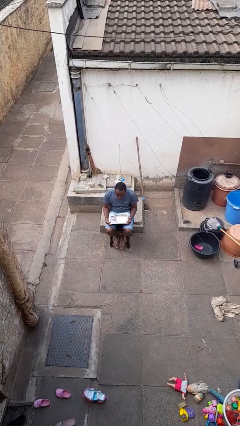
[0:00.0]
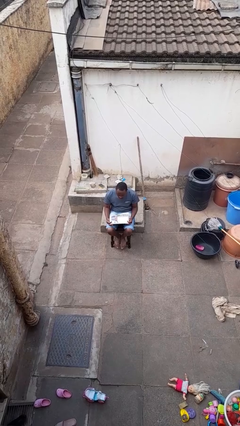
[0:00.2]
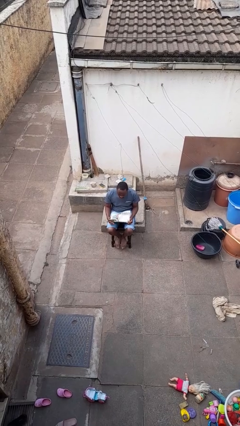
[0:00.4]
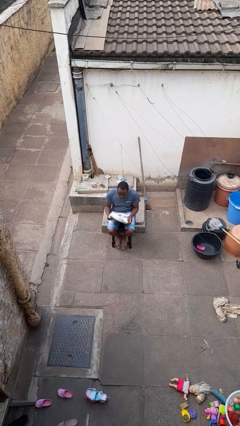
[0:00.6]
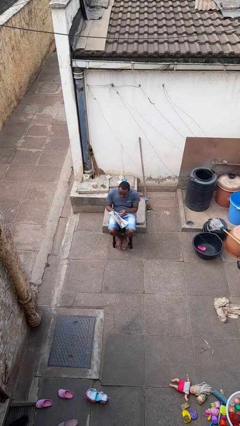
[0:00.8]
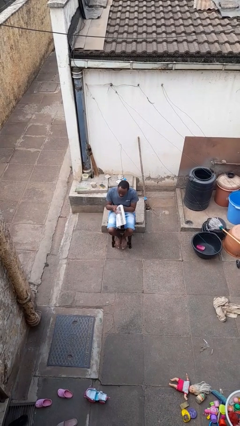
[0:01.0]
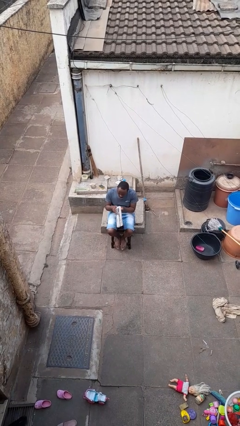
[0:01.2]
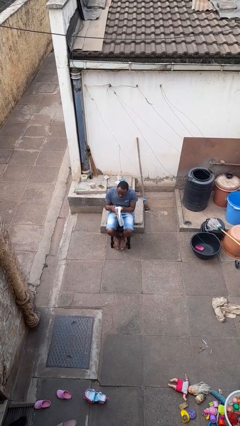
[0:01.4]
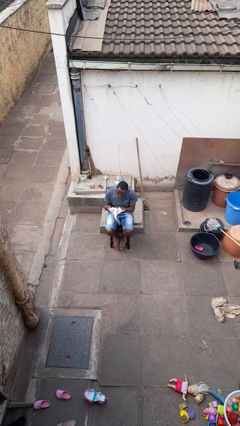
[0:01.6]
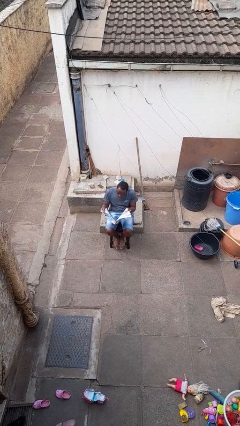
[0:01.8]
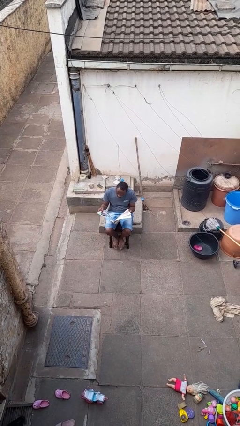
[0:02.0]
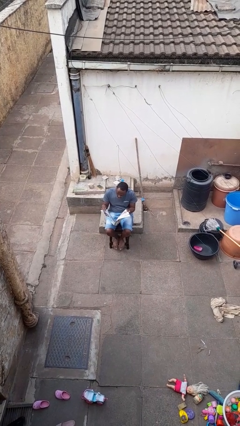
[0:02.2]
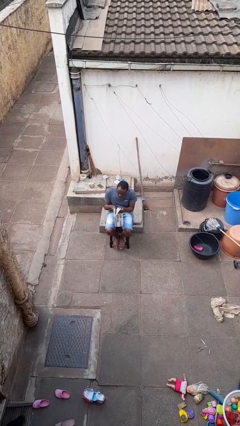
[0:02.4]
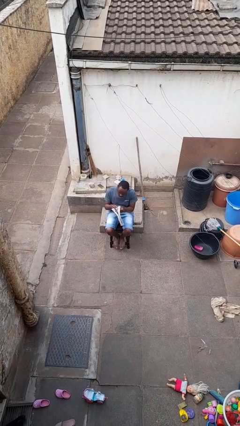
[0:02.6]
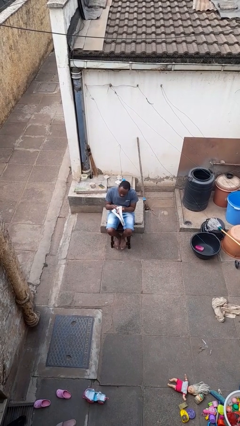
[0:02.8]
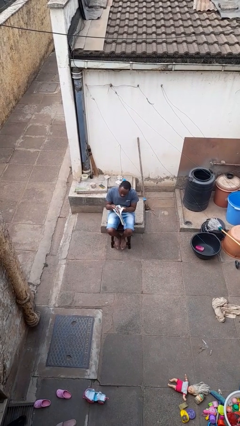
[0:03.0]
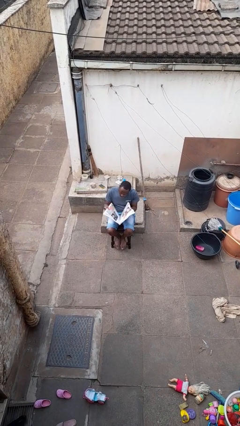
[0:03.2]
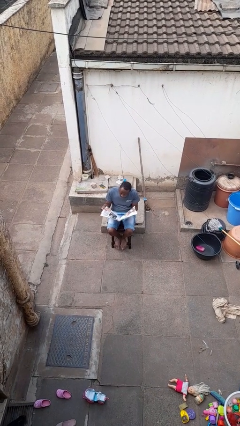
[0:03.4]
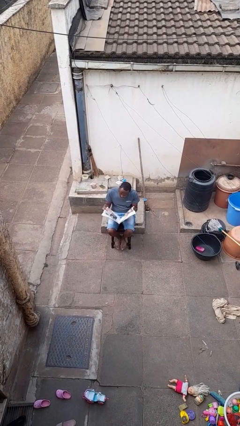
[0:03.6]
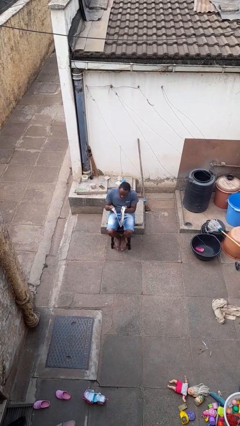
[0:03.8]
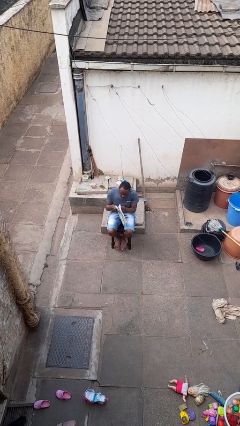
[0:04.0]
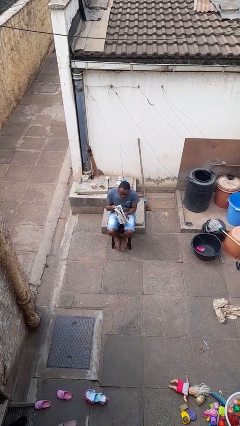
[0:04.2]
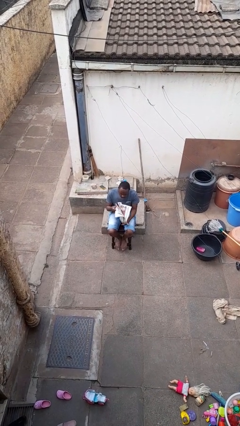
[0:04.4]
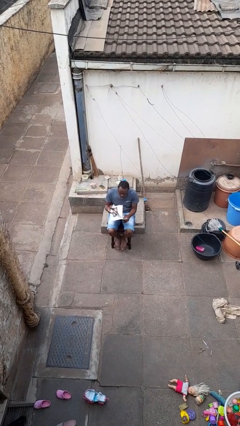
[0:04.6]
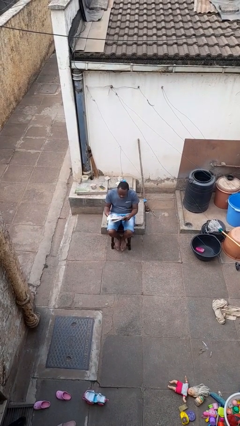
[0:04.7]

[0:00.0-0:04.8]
person reads newspaper

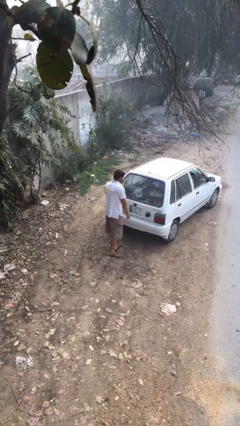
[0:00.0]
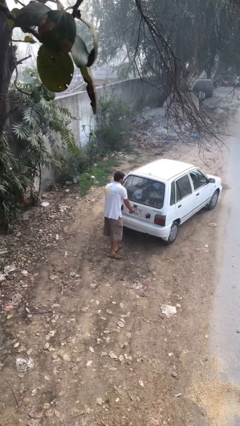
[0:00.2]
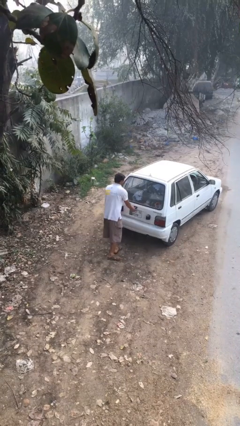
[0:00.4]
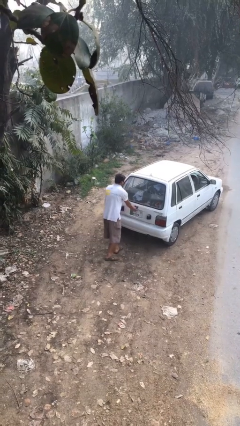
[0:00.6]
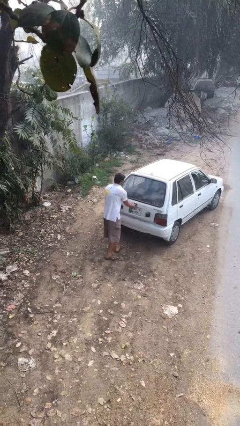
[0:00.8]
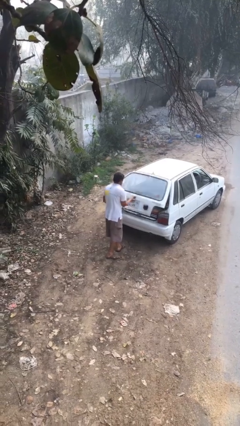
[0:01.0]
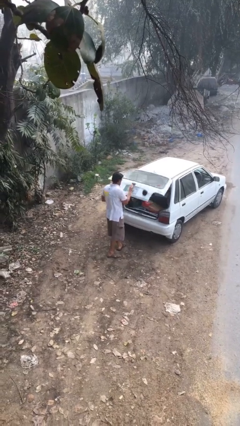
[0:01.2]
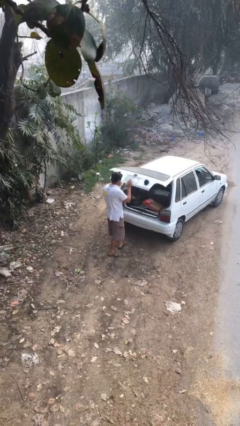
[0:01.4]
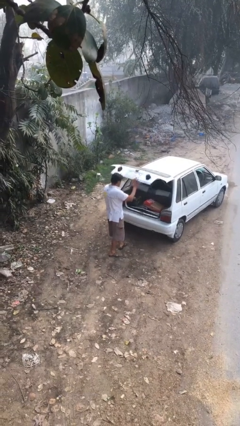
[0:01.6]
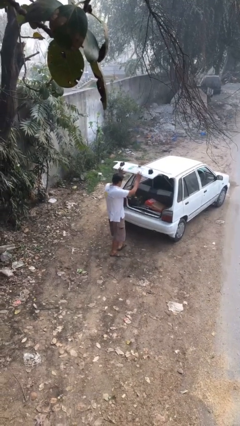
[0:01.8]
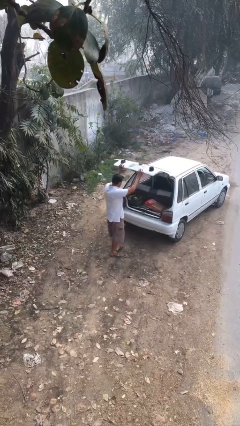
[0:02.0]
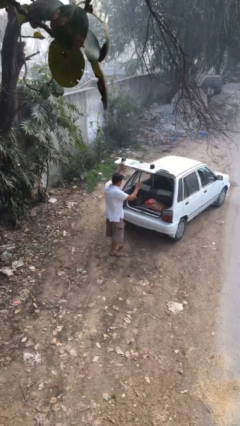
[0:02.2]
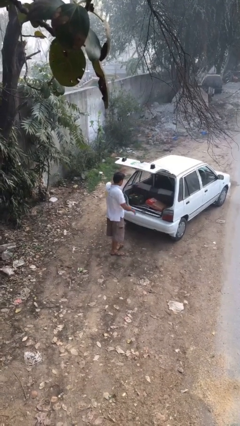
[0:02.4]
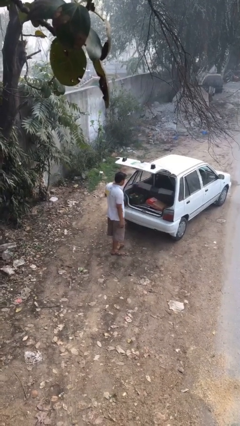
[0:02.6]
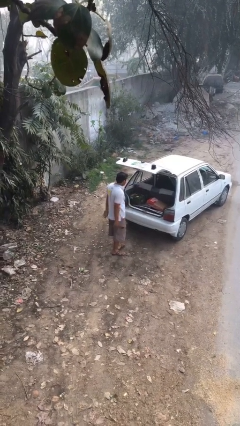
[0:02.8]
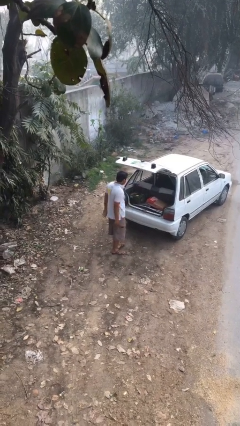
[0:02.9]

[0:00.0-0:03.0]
person opens car trunk

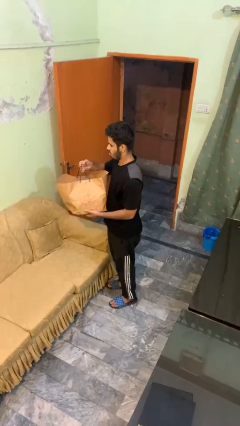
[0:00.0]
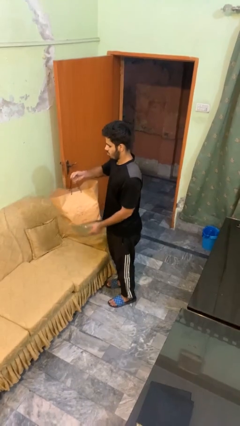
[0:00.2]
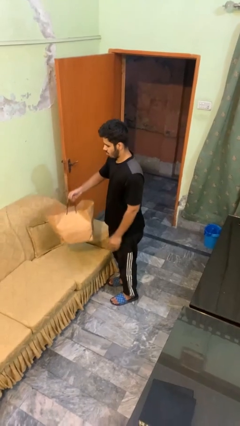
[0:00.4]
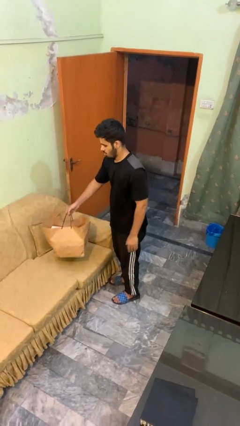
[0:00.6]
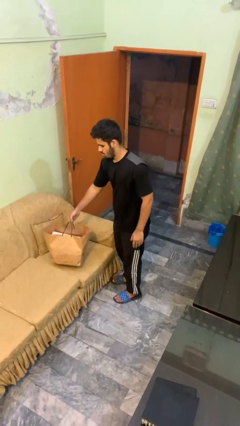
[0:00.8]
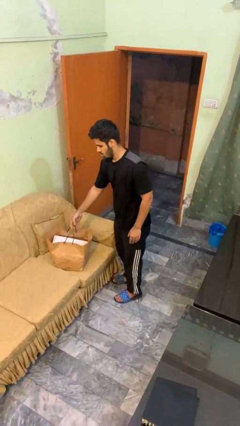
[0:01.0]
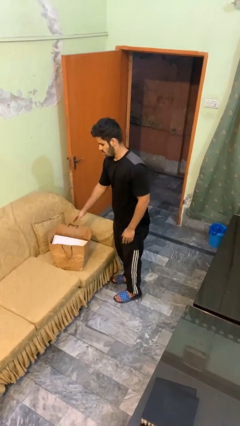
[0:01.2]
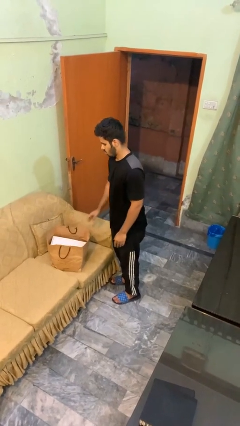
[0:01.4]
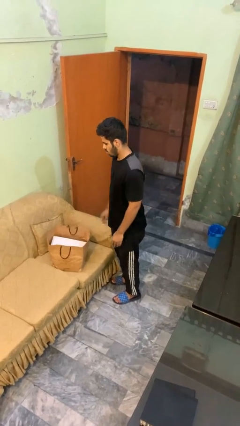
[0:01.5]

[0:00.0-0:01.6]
person puts down object on couch

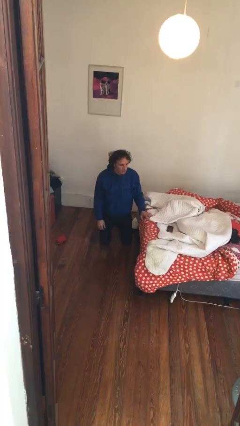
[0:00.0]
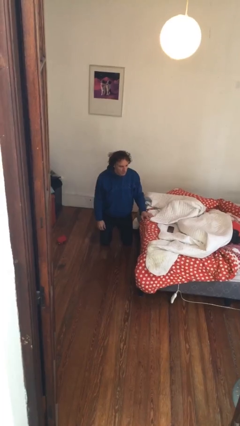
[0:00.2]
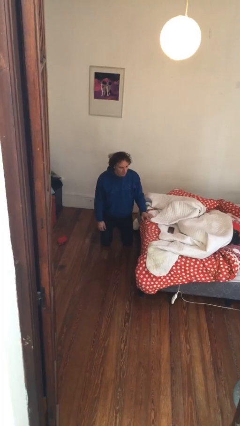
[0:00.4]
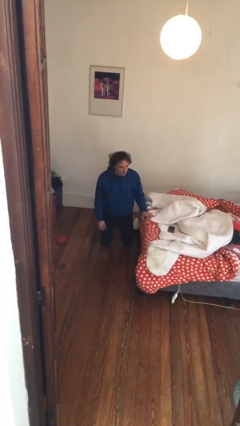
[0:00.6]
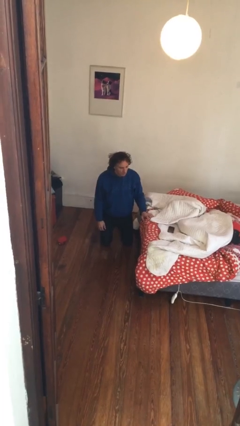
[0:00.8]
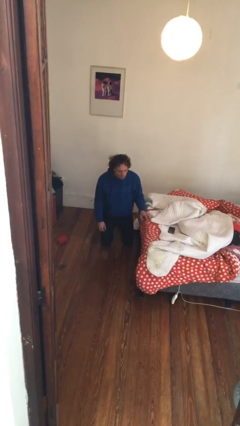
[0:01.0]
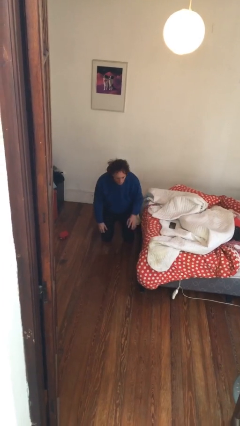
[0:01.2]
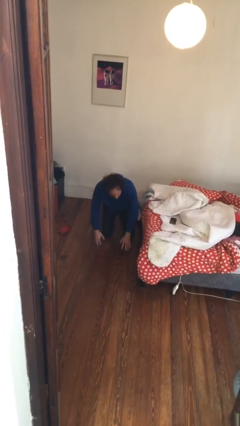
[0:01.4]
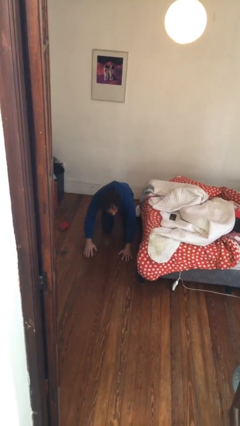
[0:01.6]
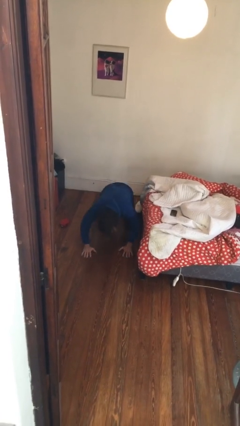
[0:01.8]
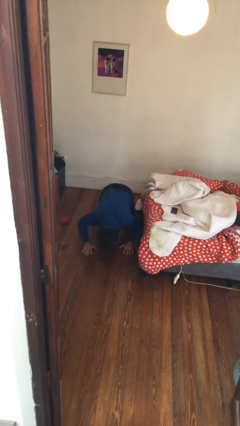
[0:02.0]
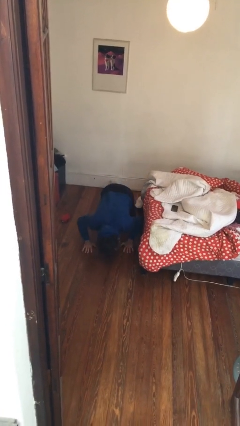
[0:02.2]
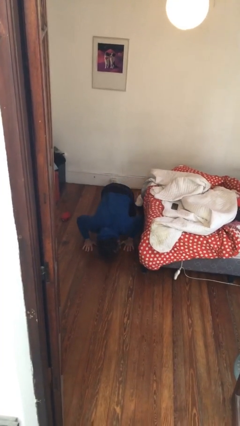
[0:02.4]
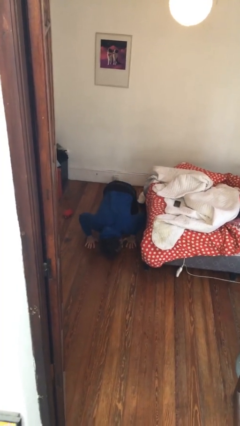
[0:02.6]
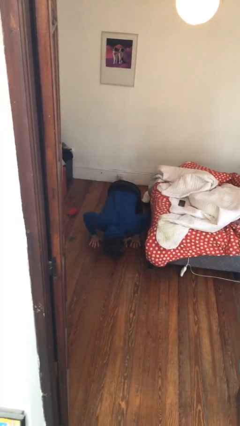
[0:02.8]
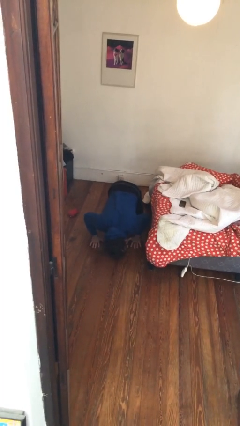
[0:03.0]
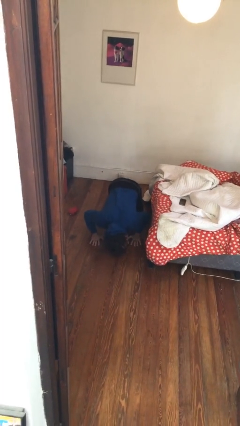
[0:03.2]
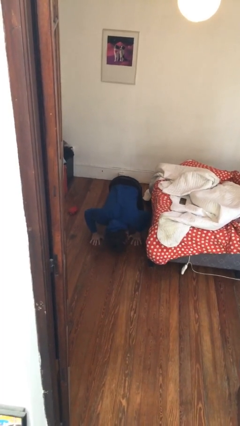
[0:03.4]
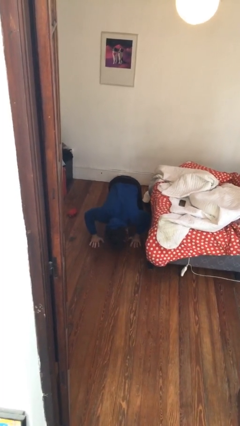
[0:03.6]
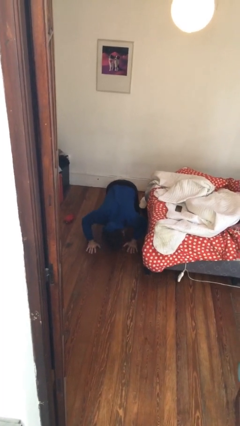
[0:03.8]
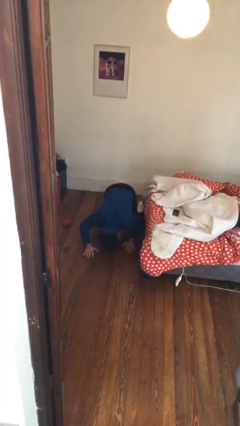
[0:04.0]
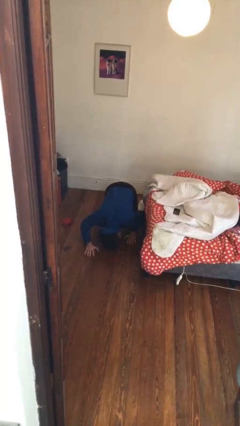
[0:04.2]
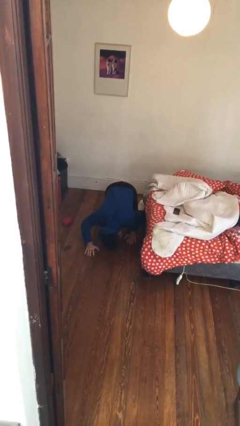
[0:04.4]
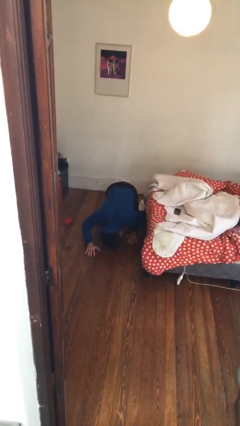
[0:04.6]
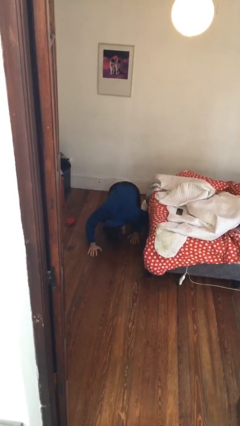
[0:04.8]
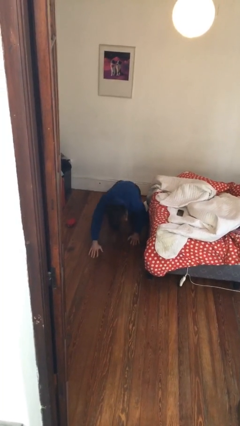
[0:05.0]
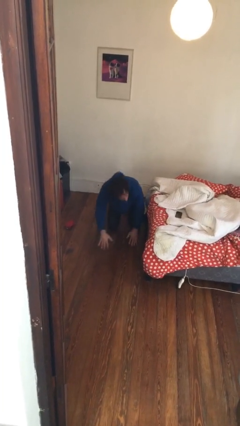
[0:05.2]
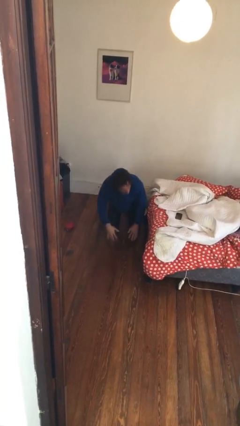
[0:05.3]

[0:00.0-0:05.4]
person searches under bed

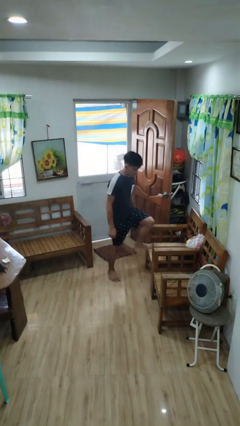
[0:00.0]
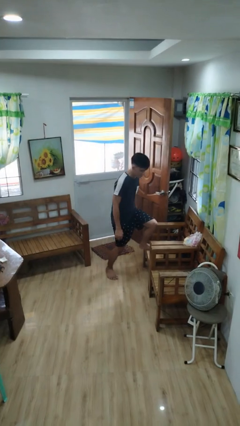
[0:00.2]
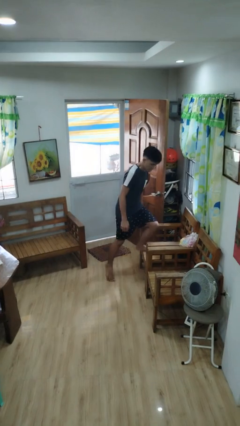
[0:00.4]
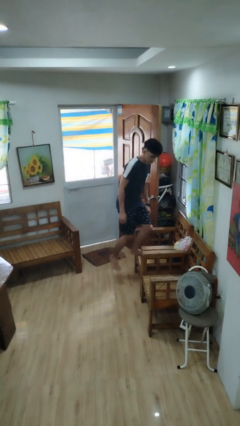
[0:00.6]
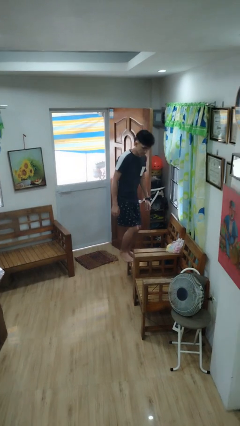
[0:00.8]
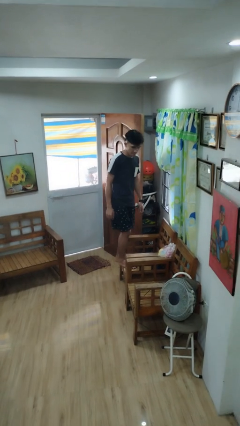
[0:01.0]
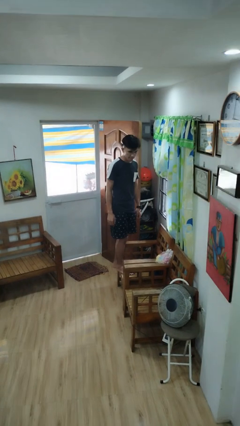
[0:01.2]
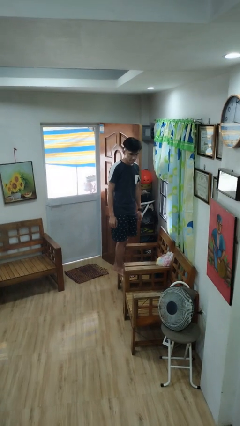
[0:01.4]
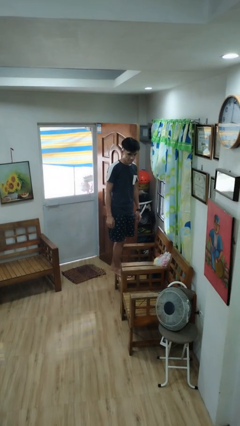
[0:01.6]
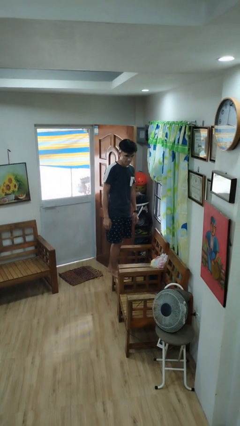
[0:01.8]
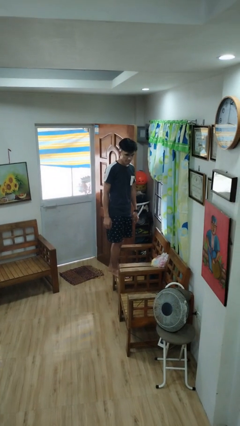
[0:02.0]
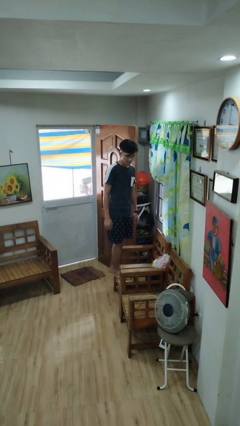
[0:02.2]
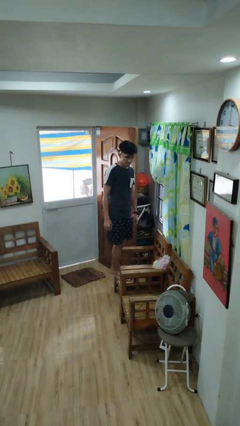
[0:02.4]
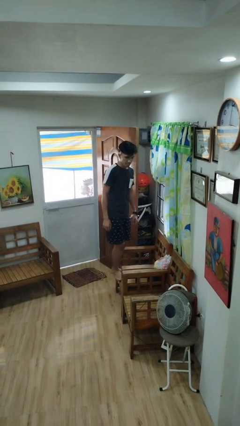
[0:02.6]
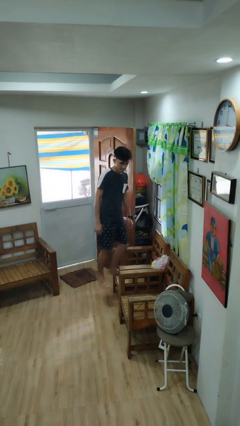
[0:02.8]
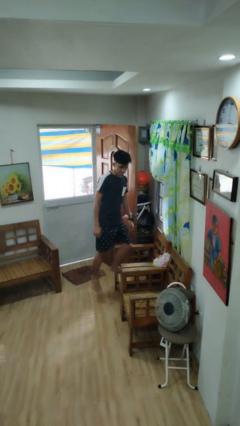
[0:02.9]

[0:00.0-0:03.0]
person climbs on chair
